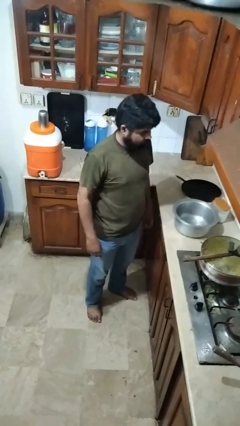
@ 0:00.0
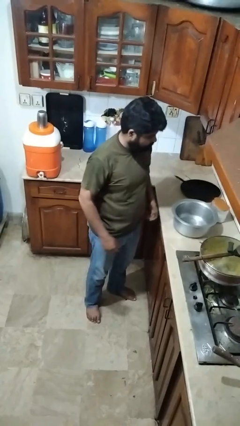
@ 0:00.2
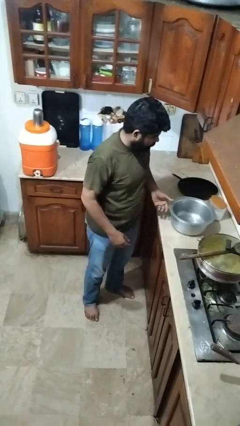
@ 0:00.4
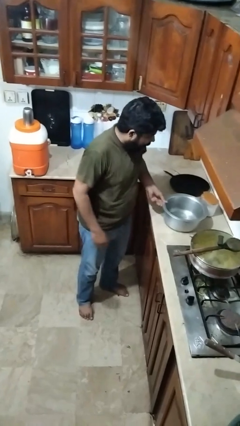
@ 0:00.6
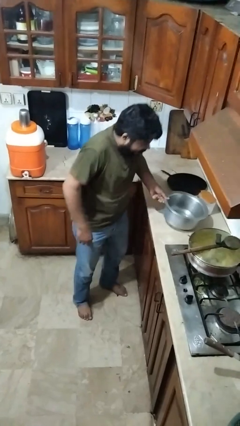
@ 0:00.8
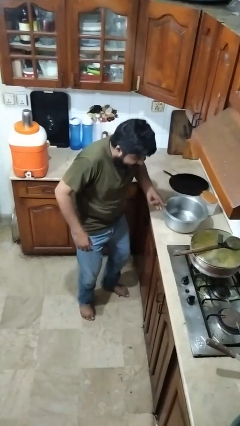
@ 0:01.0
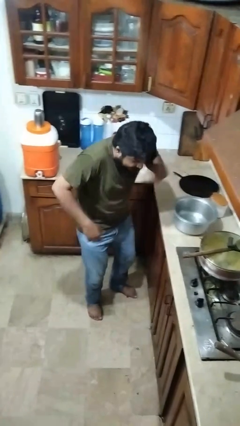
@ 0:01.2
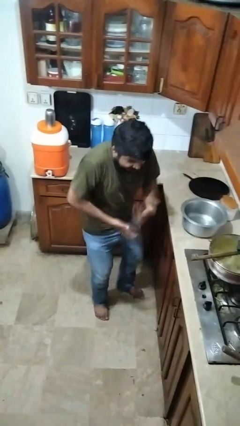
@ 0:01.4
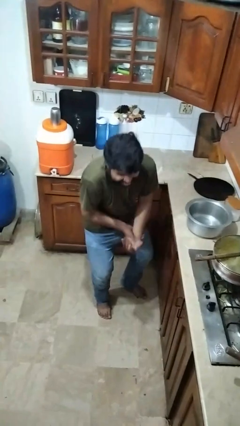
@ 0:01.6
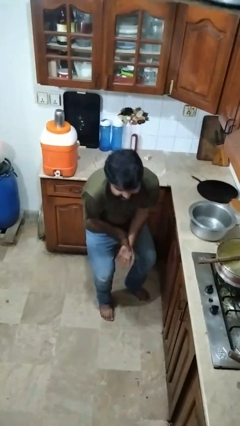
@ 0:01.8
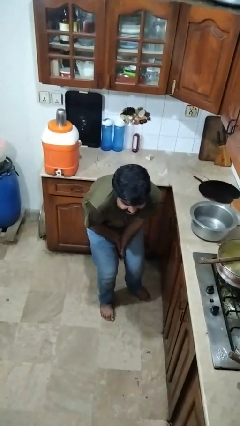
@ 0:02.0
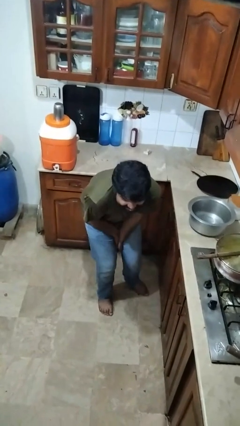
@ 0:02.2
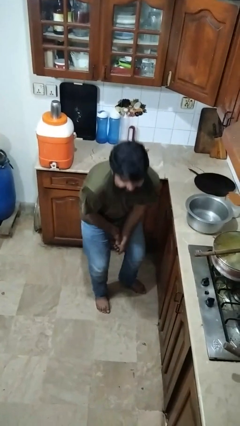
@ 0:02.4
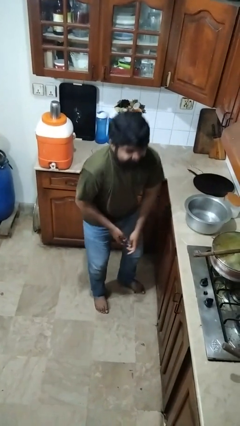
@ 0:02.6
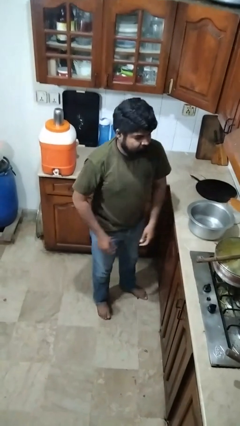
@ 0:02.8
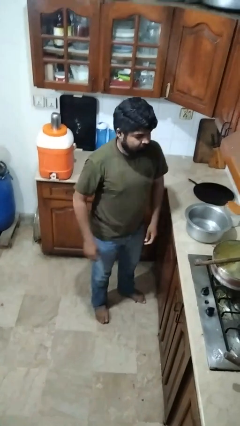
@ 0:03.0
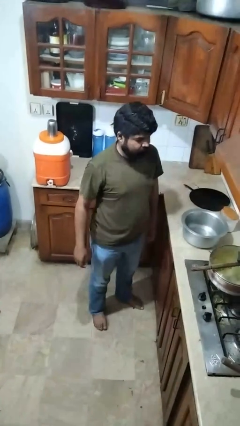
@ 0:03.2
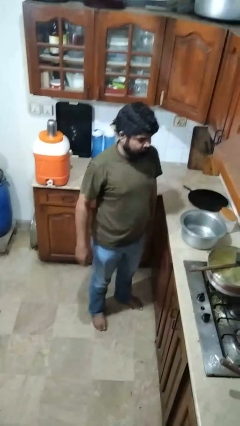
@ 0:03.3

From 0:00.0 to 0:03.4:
person burns hand

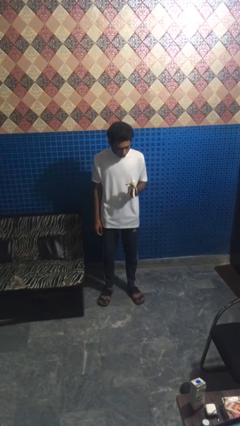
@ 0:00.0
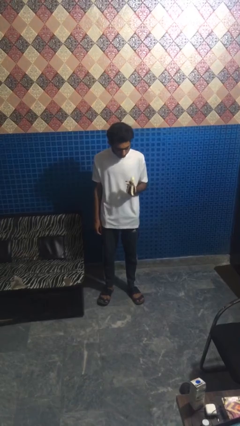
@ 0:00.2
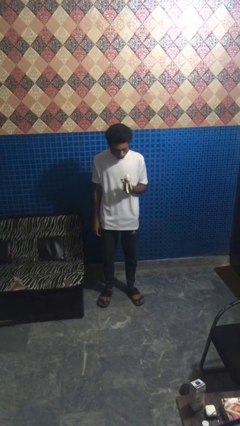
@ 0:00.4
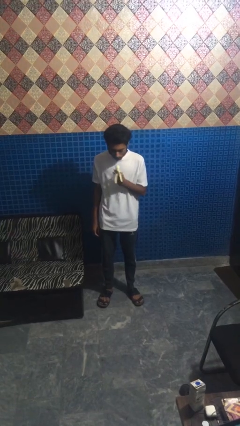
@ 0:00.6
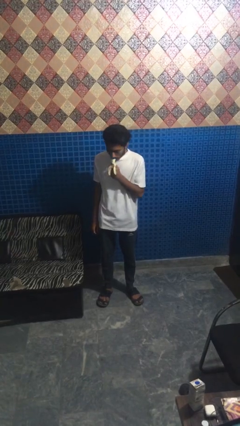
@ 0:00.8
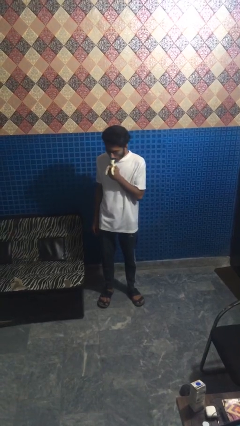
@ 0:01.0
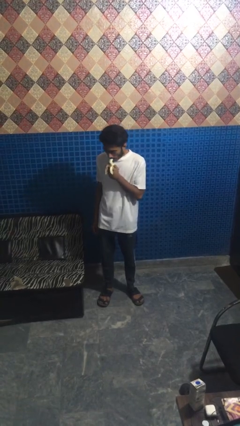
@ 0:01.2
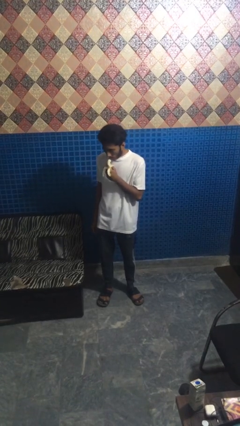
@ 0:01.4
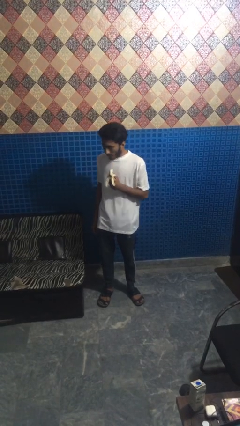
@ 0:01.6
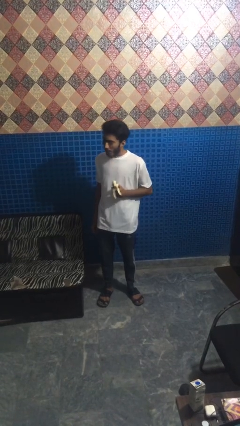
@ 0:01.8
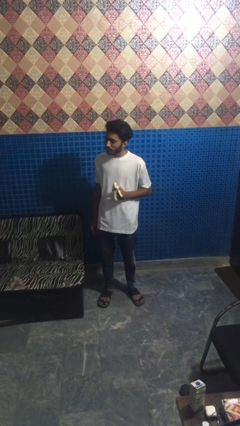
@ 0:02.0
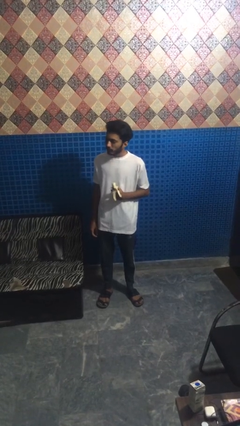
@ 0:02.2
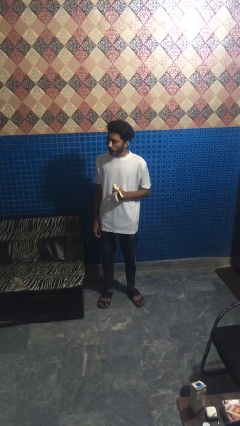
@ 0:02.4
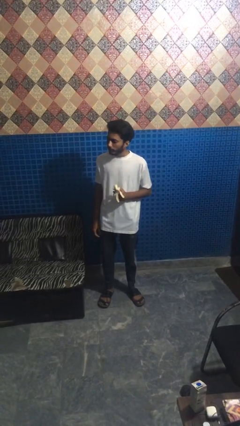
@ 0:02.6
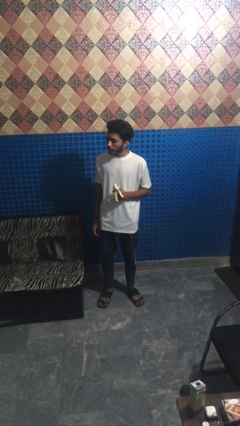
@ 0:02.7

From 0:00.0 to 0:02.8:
person eats banana

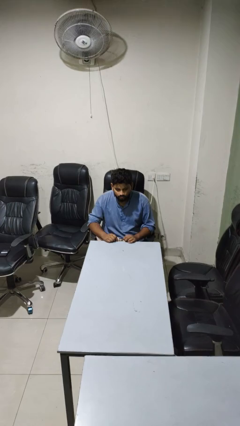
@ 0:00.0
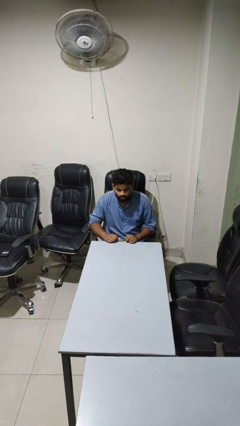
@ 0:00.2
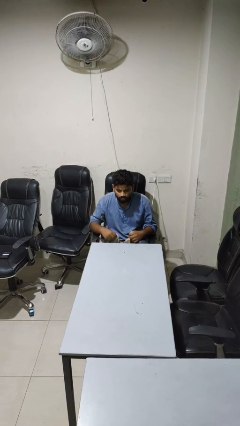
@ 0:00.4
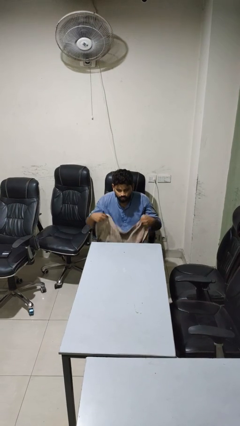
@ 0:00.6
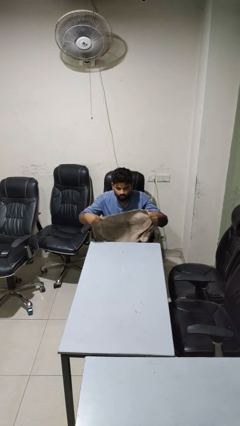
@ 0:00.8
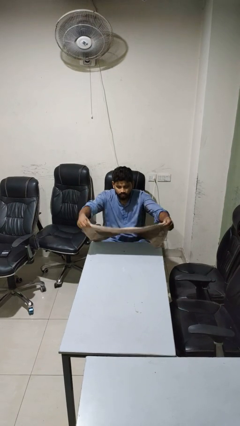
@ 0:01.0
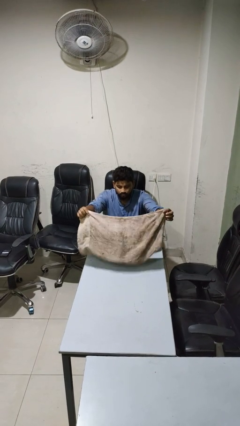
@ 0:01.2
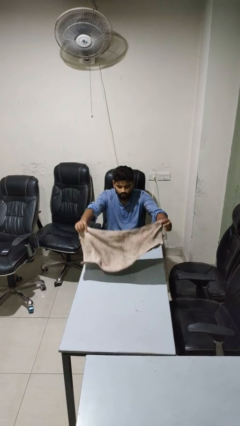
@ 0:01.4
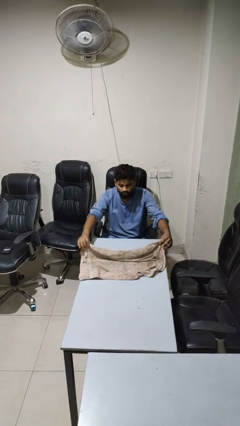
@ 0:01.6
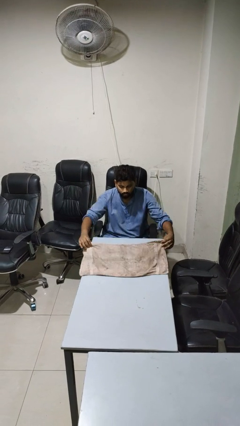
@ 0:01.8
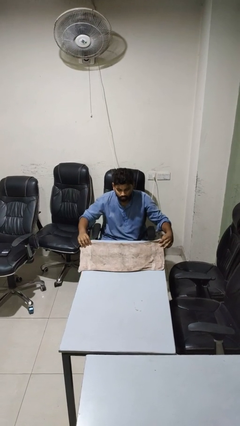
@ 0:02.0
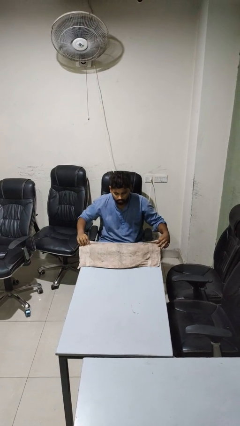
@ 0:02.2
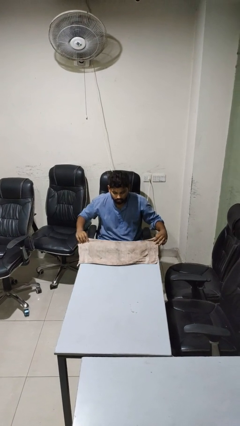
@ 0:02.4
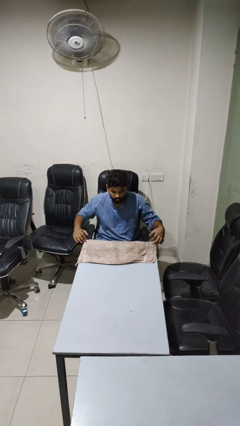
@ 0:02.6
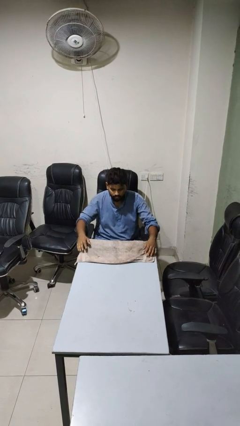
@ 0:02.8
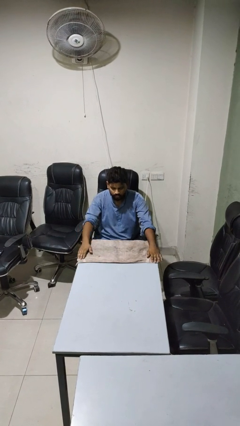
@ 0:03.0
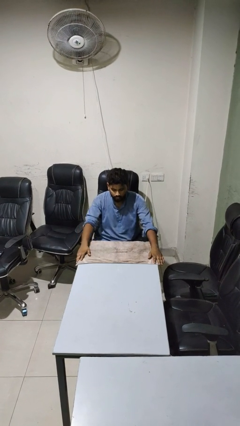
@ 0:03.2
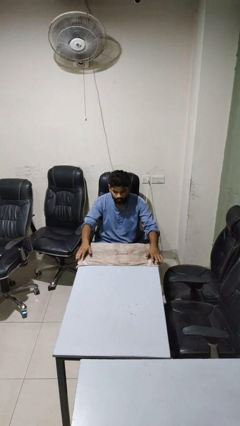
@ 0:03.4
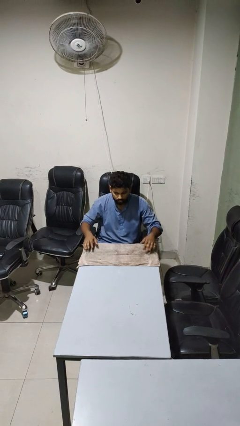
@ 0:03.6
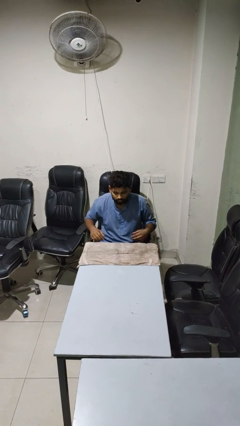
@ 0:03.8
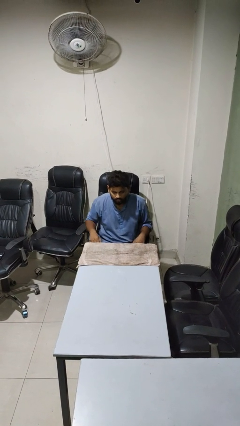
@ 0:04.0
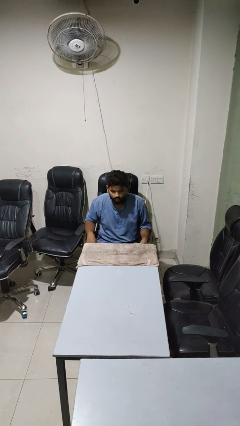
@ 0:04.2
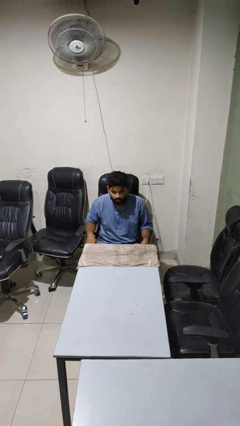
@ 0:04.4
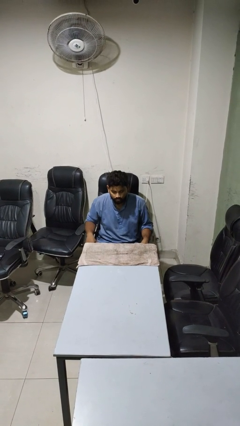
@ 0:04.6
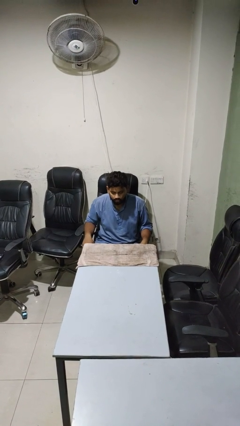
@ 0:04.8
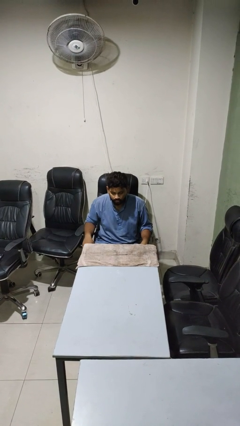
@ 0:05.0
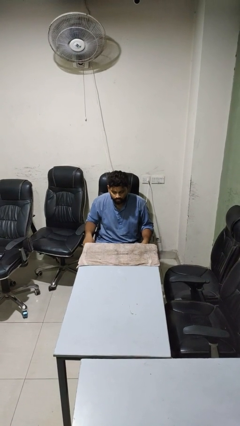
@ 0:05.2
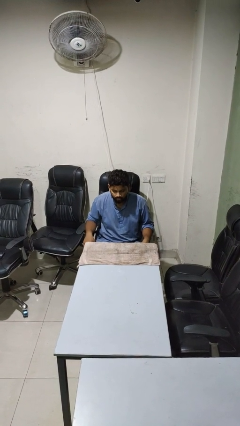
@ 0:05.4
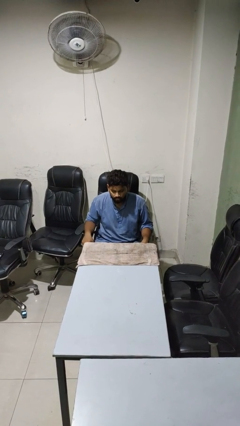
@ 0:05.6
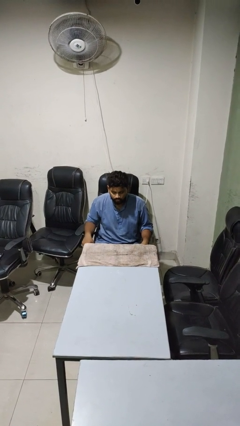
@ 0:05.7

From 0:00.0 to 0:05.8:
person spreads tablecloth

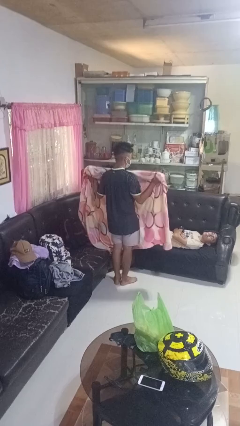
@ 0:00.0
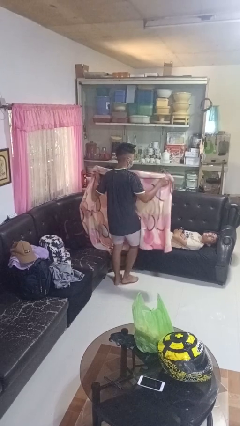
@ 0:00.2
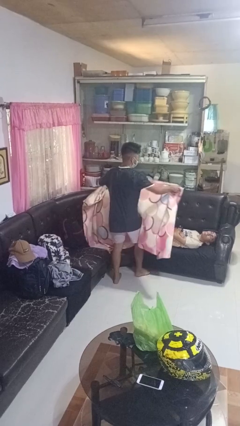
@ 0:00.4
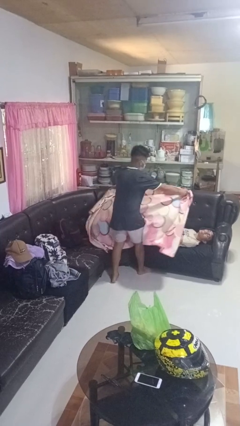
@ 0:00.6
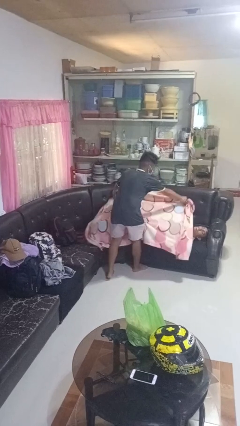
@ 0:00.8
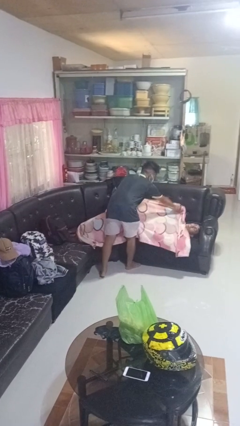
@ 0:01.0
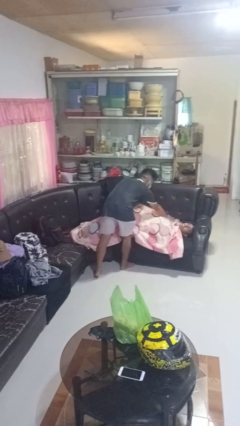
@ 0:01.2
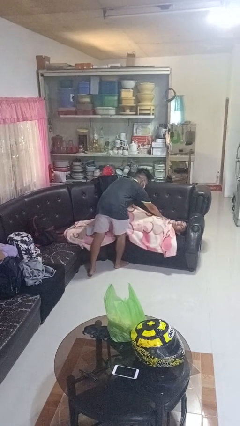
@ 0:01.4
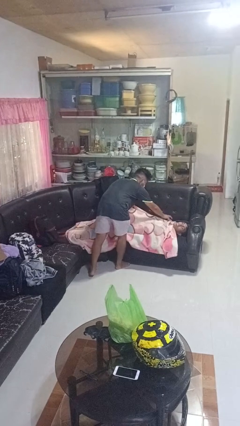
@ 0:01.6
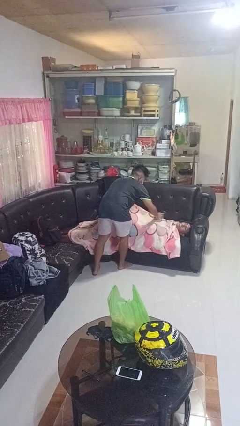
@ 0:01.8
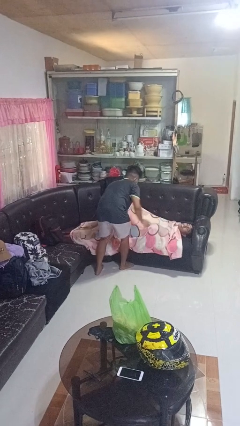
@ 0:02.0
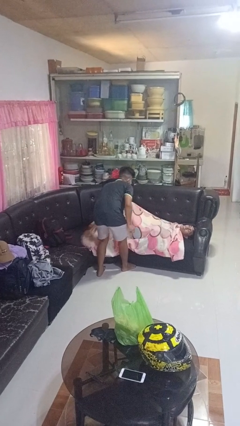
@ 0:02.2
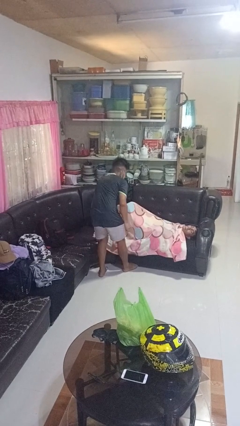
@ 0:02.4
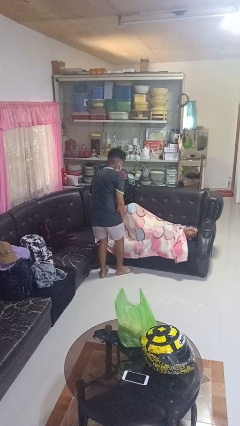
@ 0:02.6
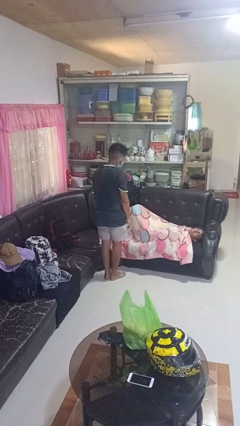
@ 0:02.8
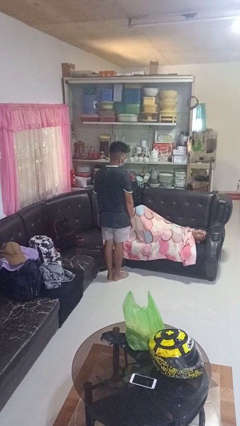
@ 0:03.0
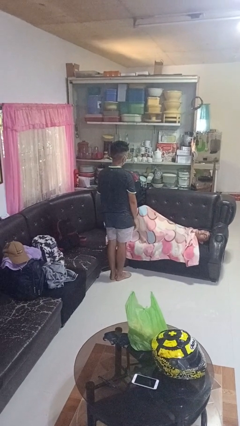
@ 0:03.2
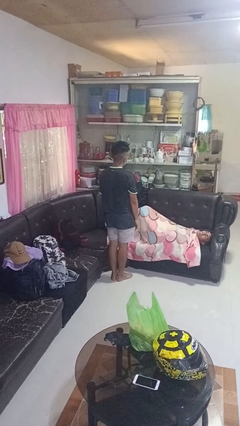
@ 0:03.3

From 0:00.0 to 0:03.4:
person covers friend with blanket

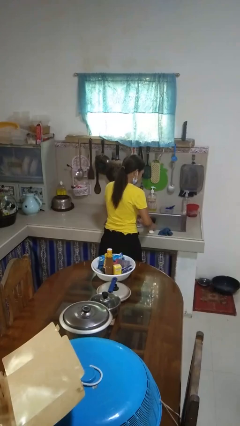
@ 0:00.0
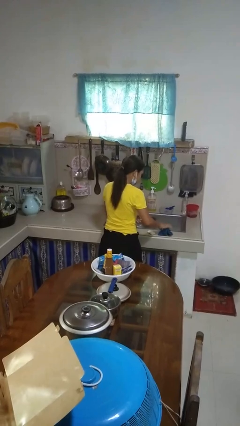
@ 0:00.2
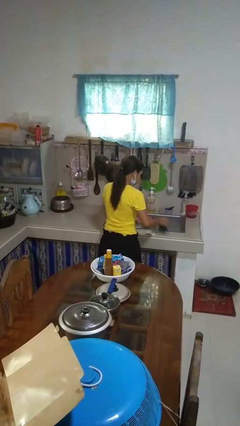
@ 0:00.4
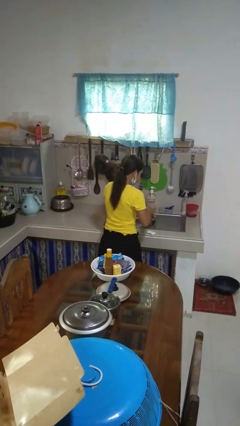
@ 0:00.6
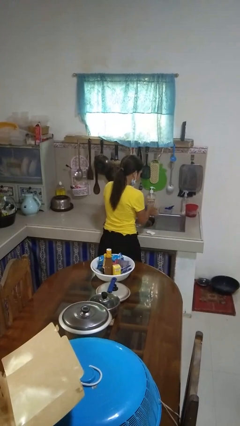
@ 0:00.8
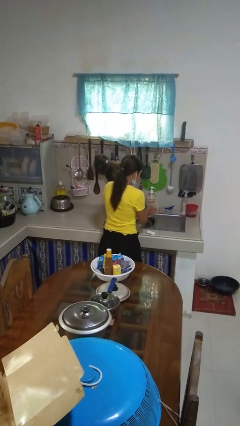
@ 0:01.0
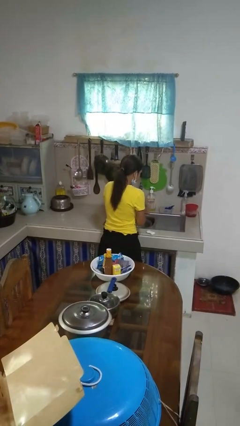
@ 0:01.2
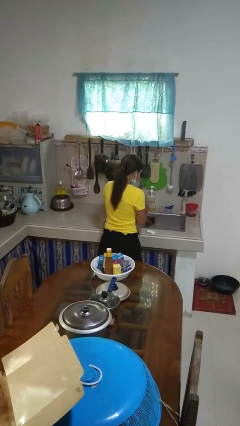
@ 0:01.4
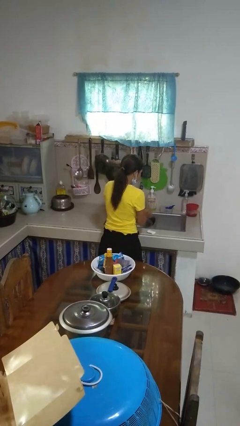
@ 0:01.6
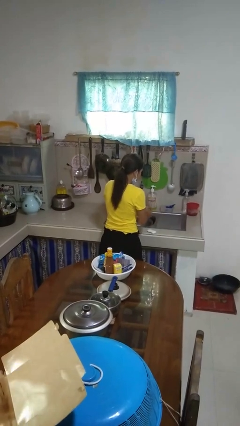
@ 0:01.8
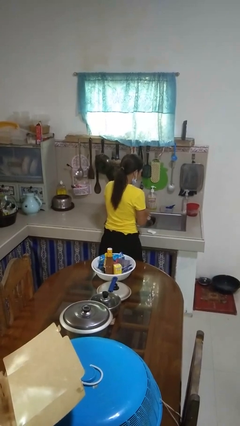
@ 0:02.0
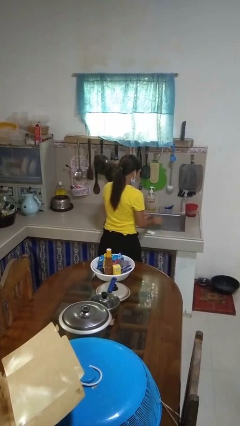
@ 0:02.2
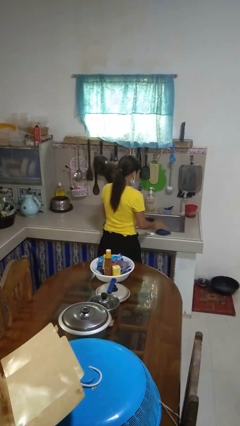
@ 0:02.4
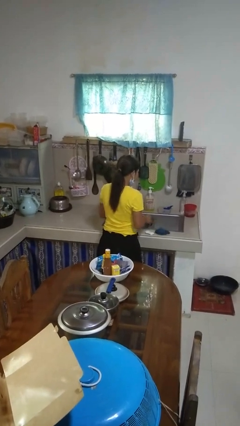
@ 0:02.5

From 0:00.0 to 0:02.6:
person dries hands with towel
